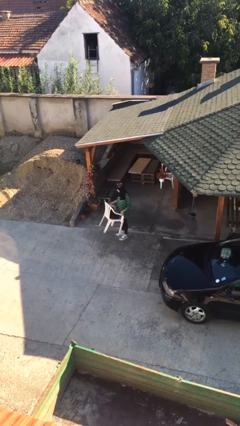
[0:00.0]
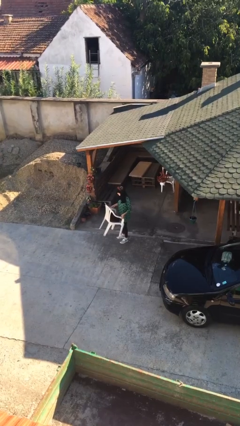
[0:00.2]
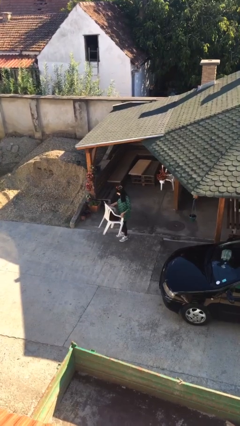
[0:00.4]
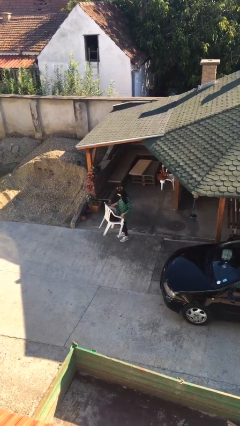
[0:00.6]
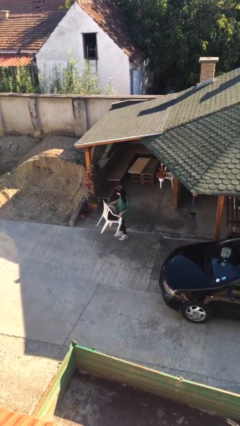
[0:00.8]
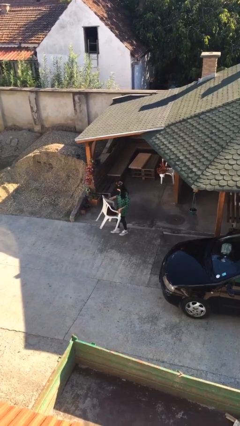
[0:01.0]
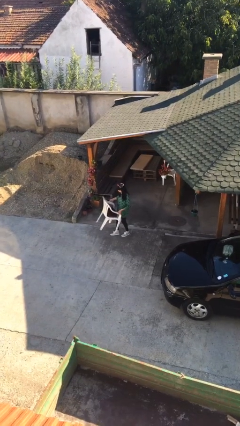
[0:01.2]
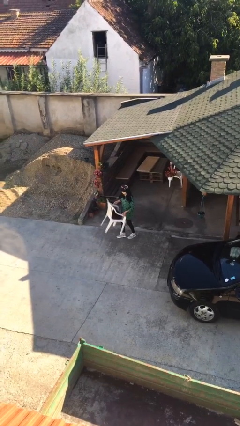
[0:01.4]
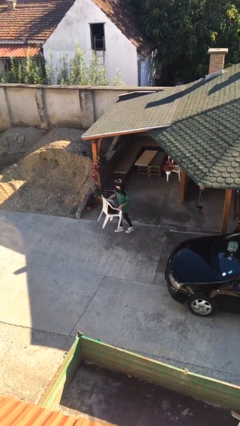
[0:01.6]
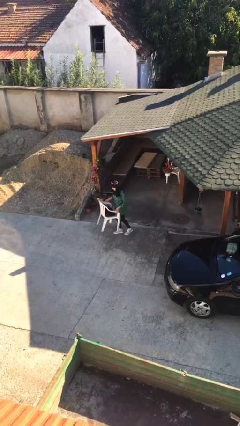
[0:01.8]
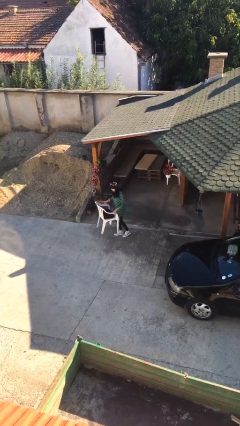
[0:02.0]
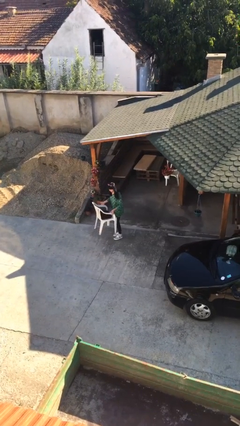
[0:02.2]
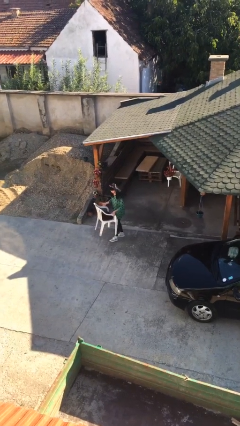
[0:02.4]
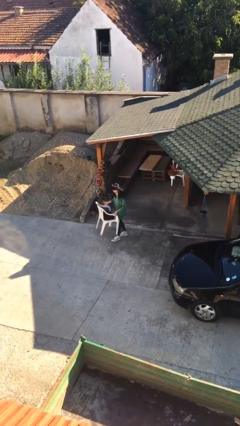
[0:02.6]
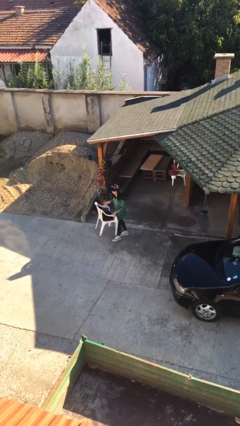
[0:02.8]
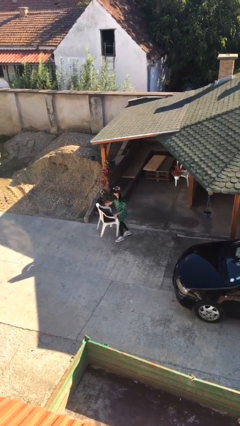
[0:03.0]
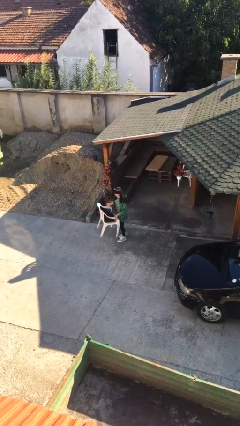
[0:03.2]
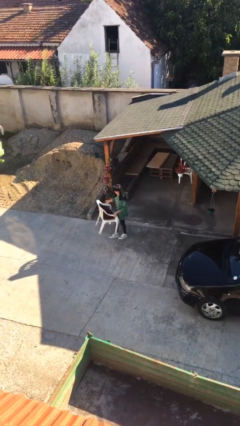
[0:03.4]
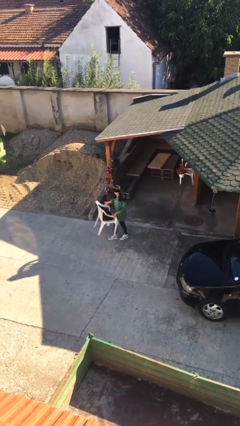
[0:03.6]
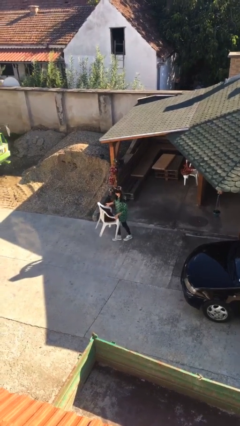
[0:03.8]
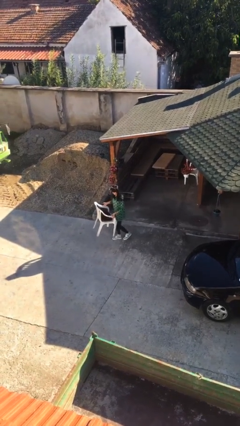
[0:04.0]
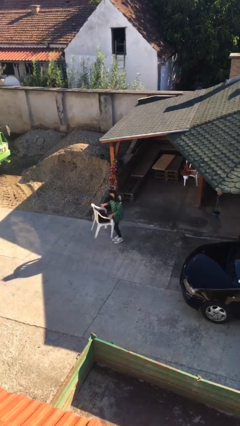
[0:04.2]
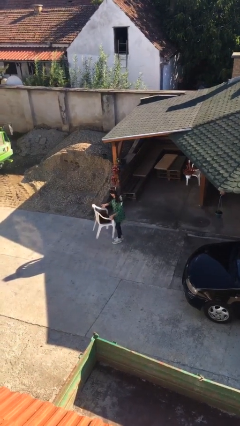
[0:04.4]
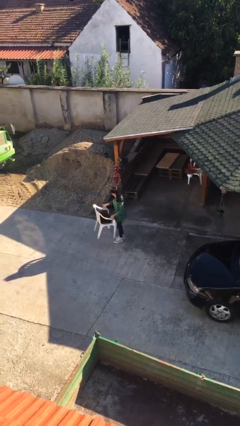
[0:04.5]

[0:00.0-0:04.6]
person carries heavy object

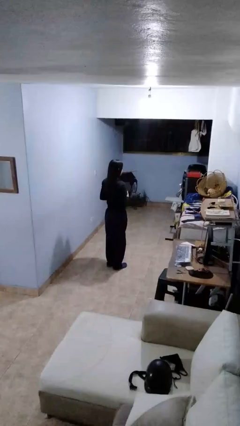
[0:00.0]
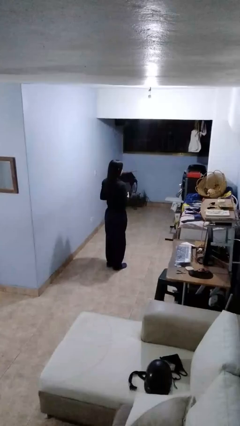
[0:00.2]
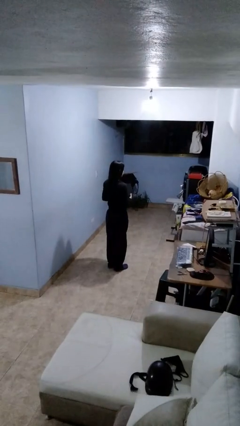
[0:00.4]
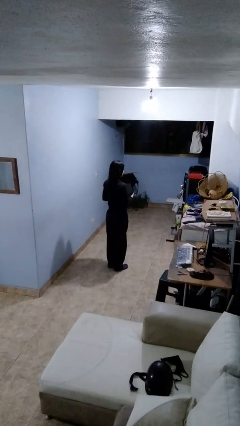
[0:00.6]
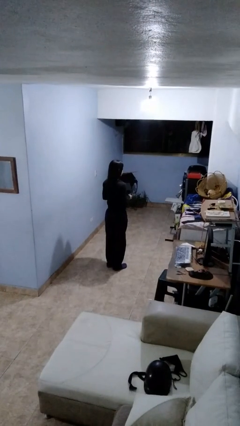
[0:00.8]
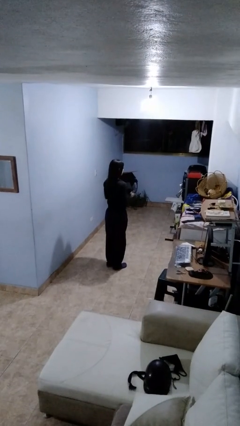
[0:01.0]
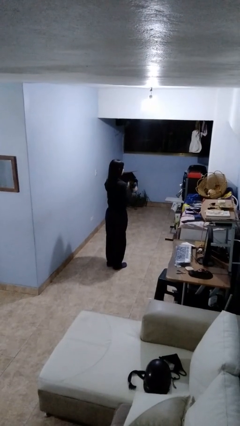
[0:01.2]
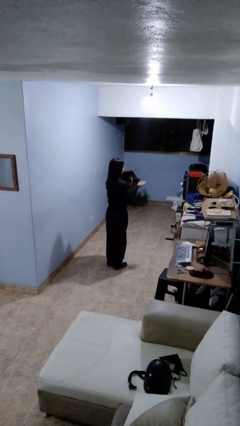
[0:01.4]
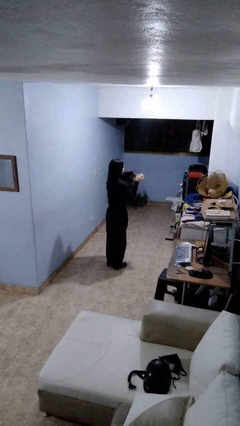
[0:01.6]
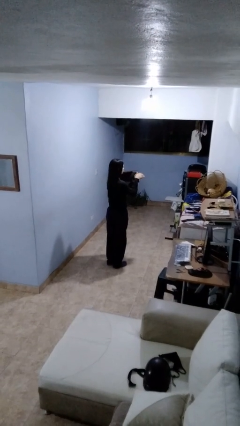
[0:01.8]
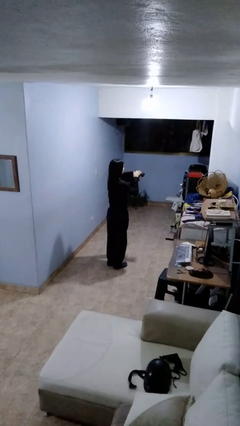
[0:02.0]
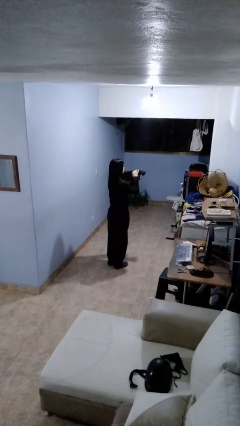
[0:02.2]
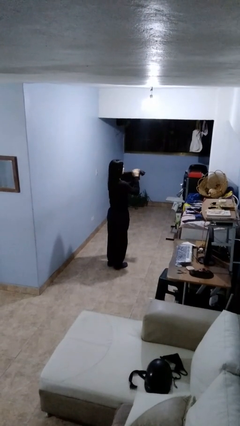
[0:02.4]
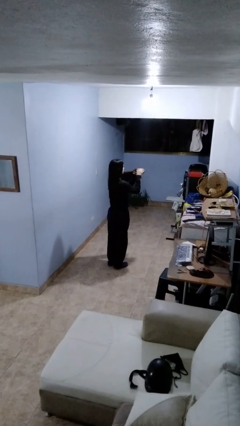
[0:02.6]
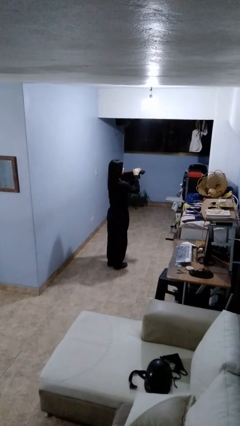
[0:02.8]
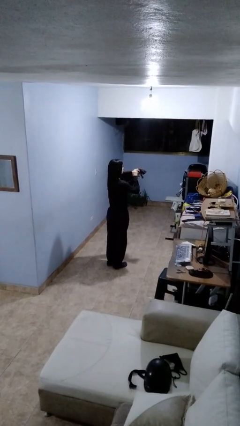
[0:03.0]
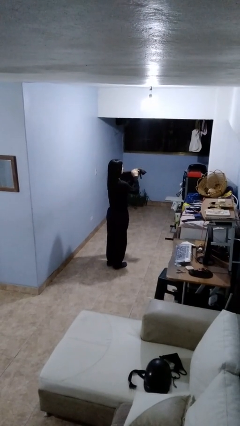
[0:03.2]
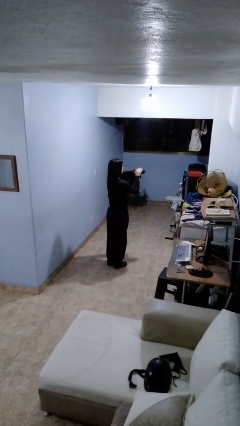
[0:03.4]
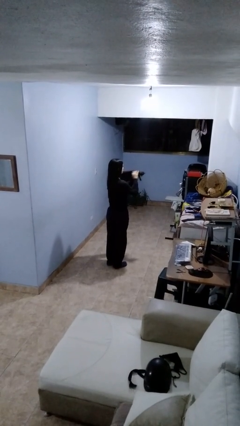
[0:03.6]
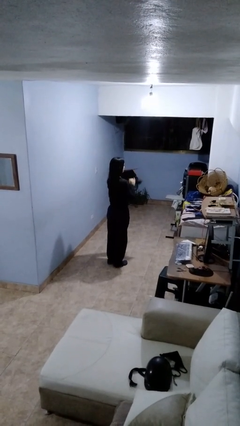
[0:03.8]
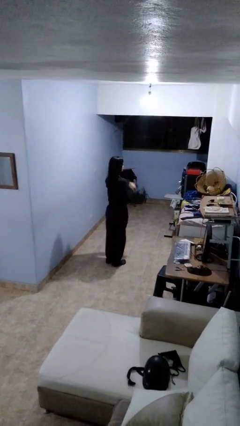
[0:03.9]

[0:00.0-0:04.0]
person pets cat

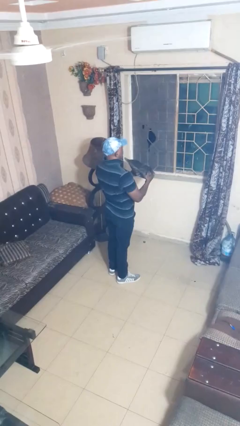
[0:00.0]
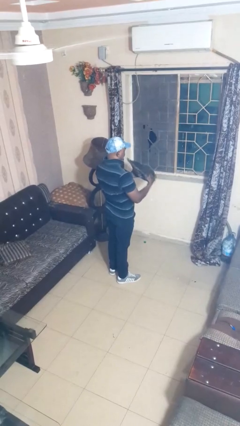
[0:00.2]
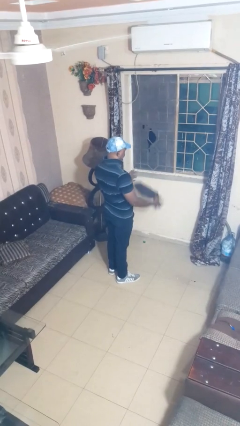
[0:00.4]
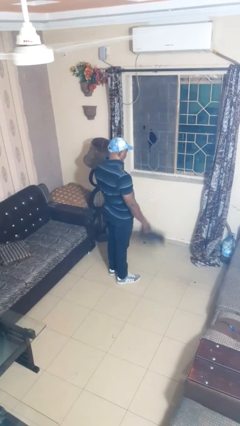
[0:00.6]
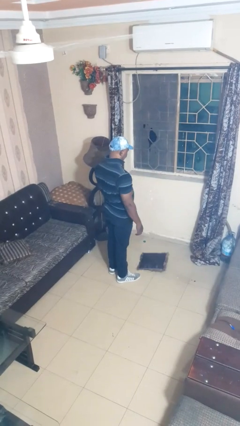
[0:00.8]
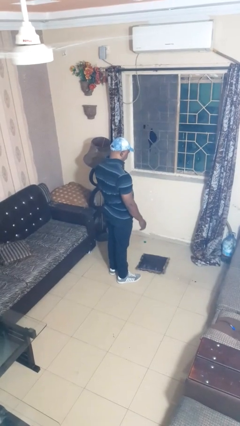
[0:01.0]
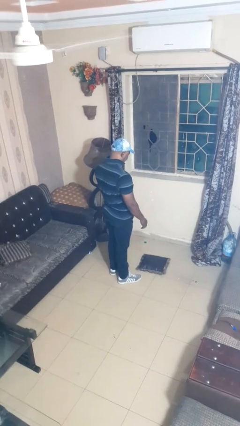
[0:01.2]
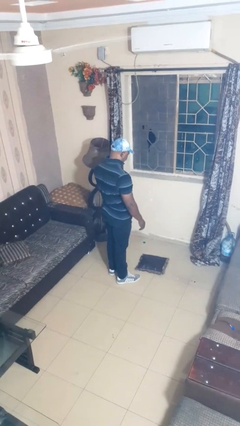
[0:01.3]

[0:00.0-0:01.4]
person catches dropped object

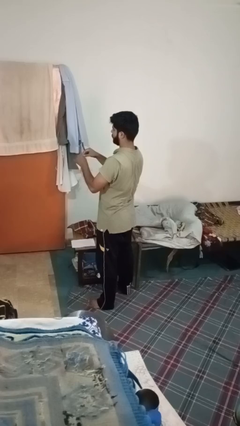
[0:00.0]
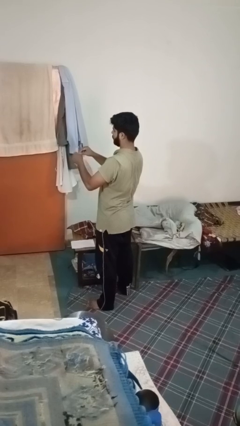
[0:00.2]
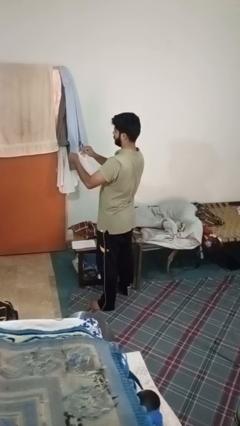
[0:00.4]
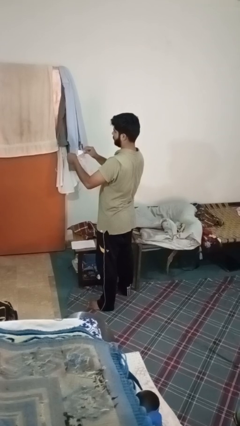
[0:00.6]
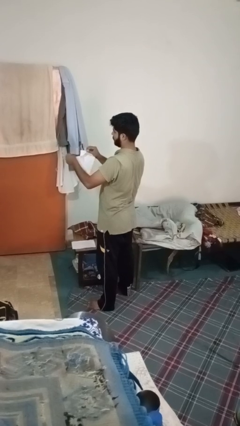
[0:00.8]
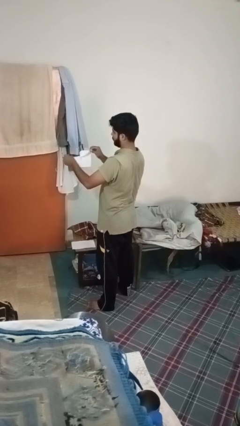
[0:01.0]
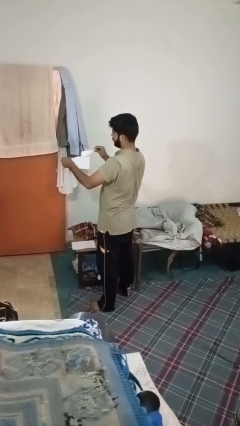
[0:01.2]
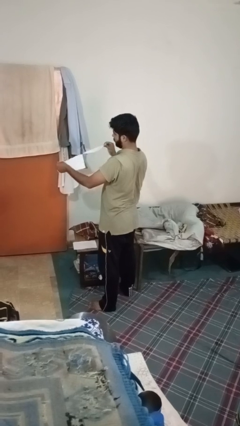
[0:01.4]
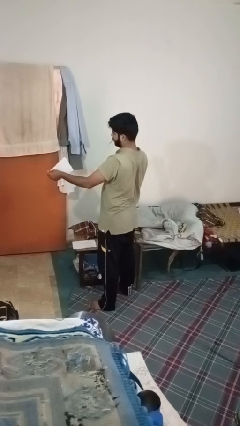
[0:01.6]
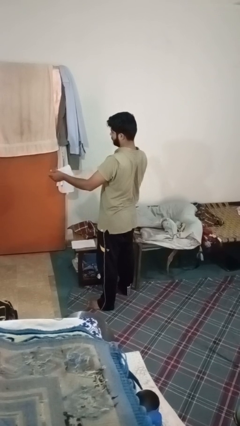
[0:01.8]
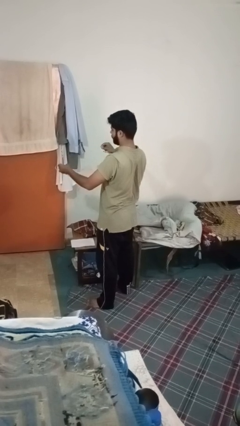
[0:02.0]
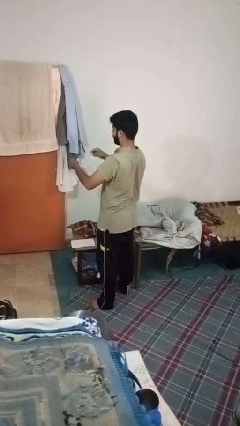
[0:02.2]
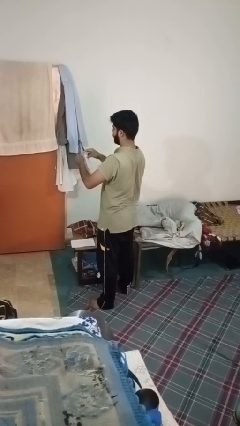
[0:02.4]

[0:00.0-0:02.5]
person tears paper

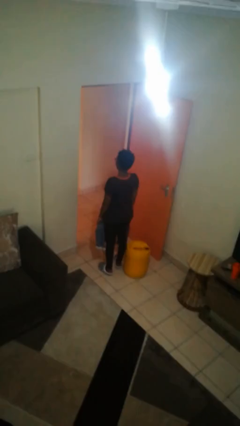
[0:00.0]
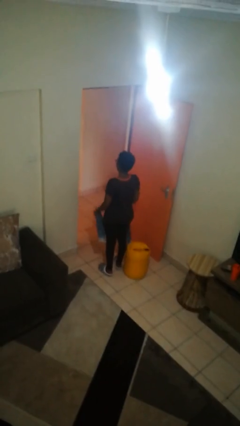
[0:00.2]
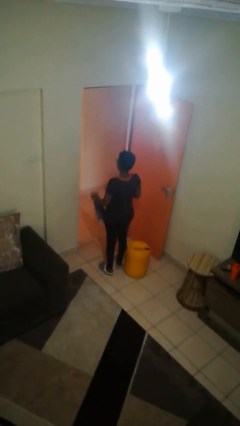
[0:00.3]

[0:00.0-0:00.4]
person puts on scarf

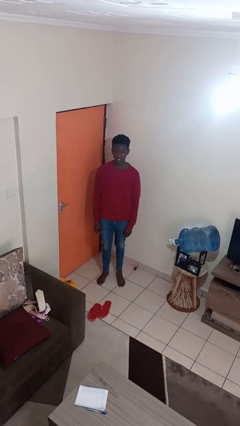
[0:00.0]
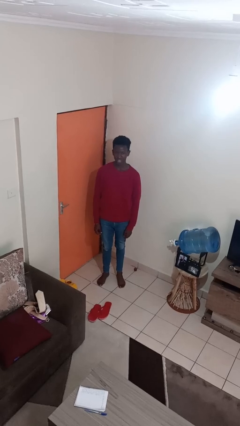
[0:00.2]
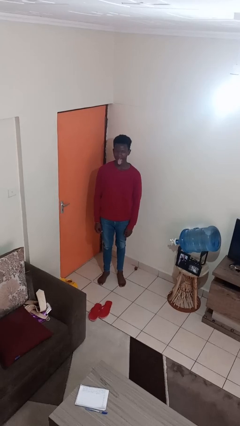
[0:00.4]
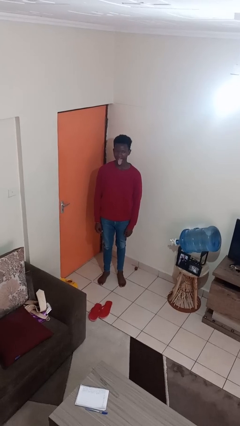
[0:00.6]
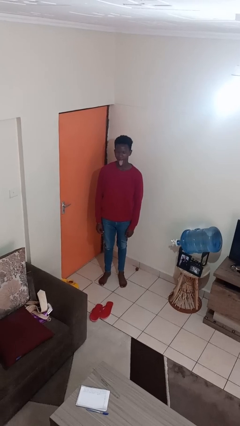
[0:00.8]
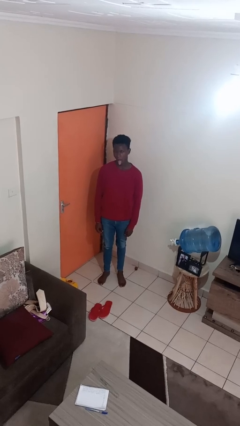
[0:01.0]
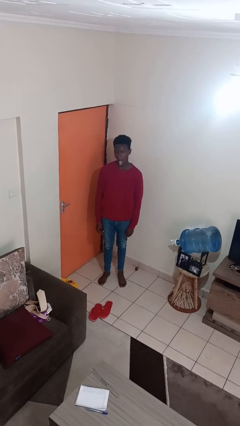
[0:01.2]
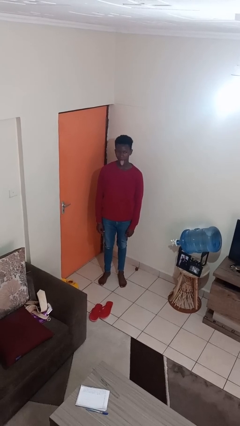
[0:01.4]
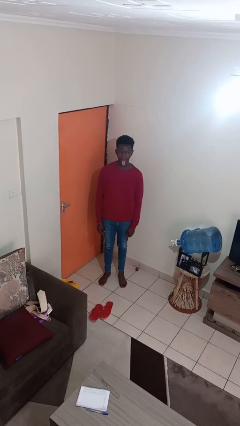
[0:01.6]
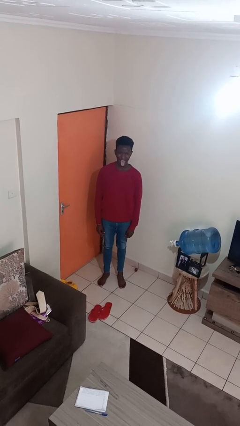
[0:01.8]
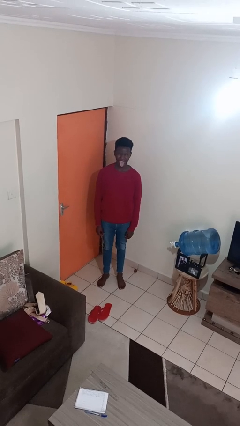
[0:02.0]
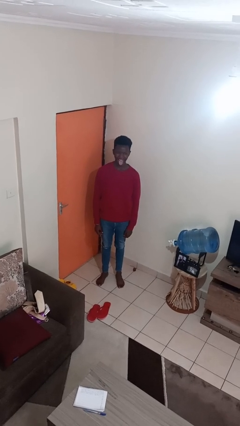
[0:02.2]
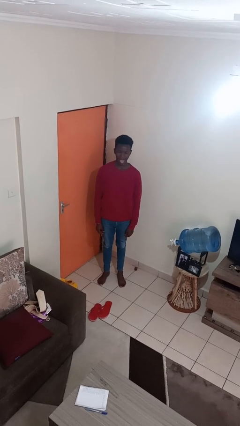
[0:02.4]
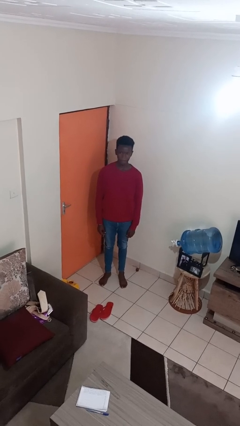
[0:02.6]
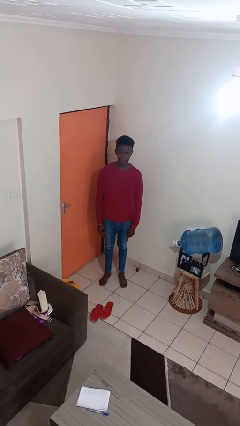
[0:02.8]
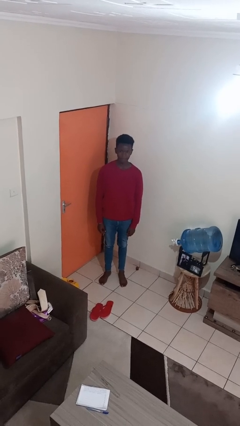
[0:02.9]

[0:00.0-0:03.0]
person sticks out tongue

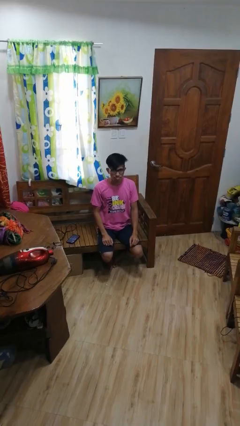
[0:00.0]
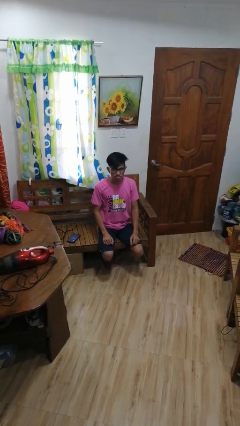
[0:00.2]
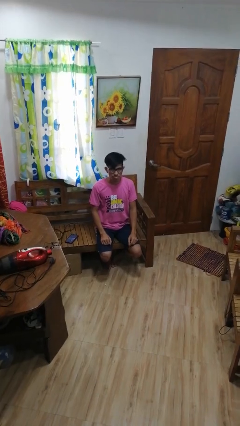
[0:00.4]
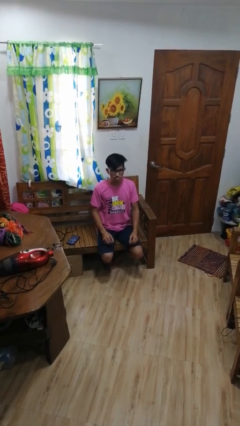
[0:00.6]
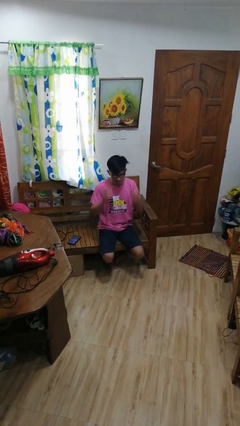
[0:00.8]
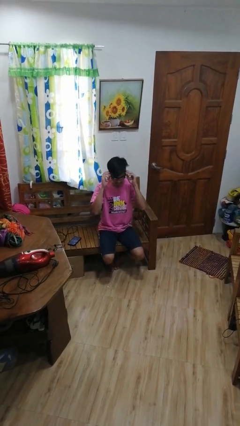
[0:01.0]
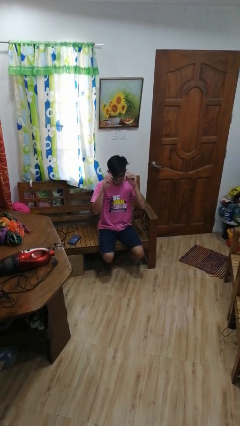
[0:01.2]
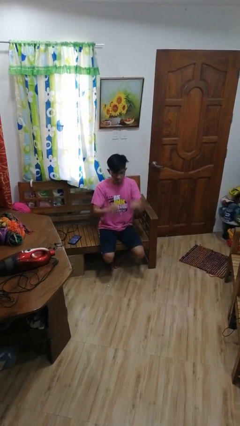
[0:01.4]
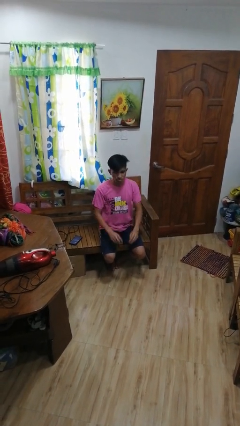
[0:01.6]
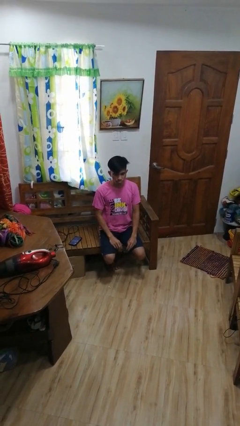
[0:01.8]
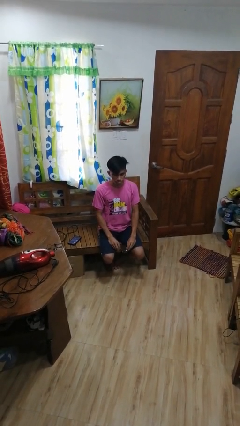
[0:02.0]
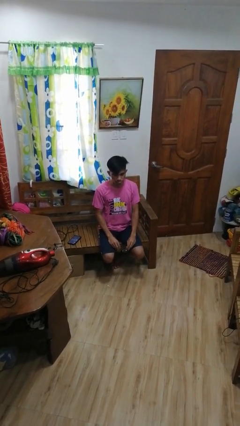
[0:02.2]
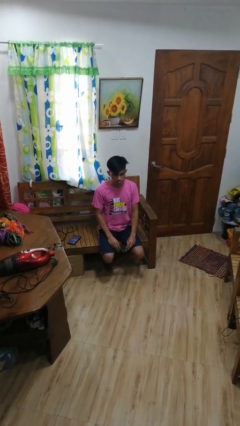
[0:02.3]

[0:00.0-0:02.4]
person takes off glasses
